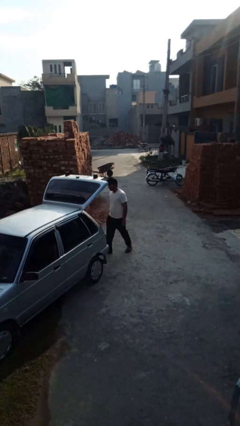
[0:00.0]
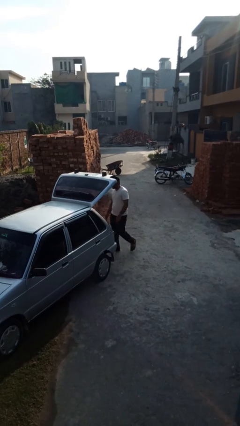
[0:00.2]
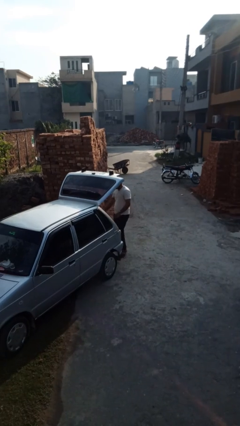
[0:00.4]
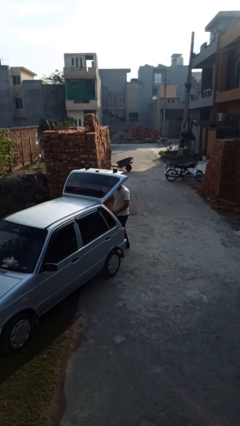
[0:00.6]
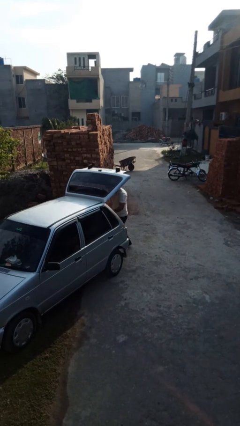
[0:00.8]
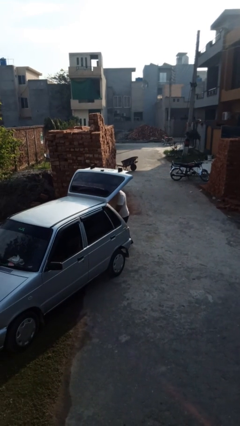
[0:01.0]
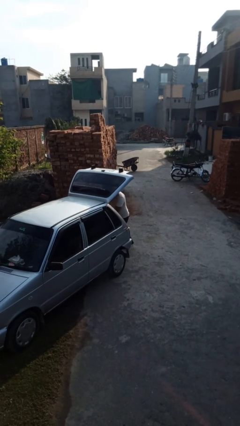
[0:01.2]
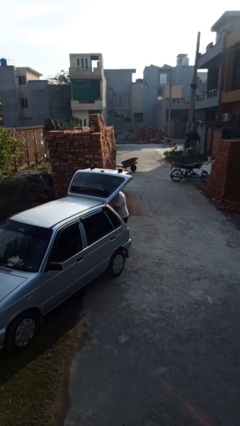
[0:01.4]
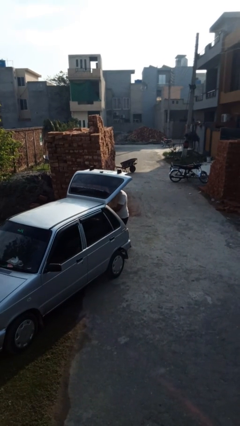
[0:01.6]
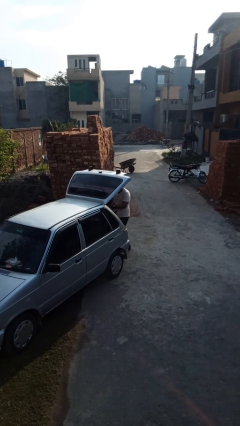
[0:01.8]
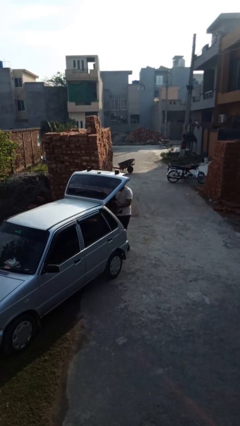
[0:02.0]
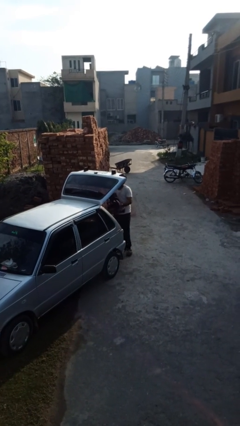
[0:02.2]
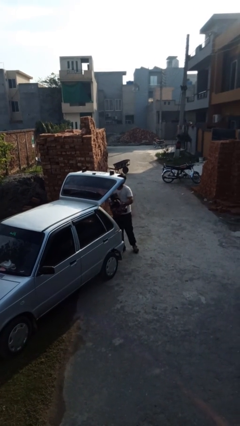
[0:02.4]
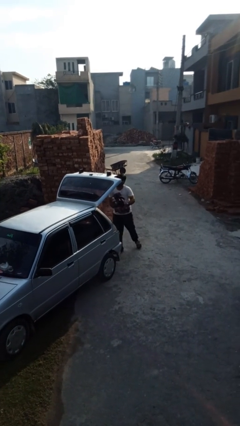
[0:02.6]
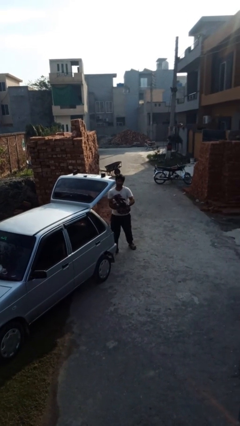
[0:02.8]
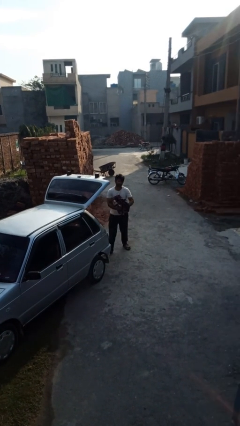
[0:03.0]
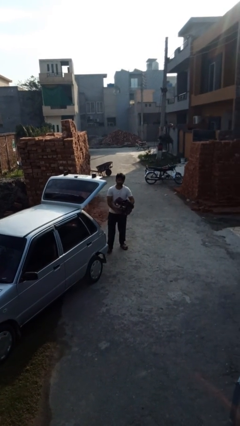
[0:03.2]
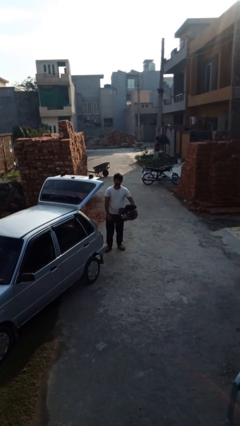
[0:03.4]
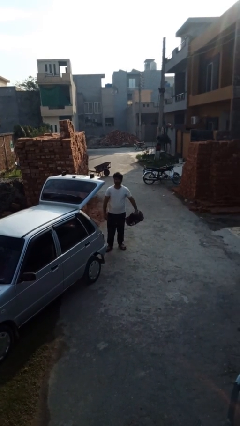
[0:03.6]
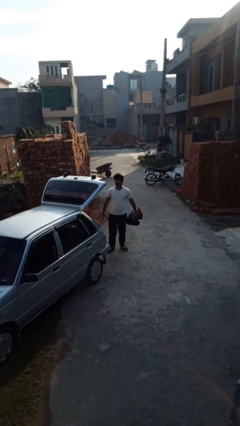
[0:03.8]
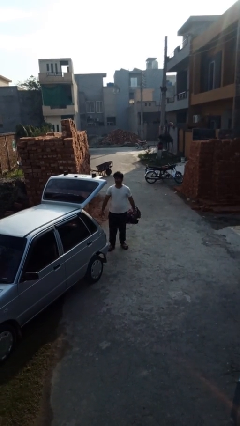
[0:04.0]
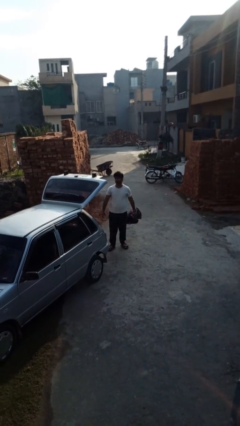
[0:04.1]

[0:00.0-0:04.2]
person unloads car

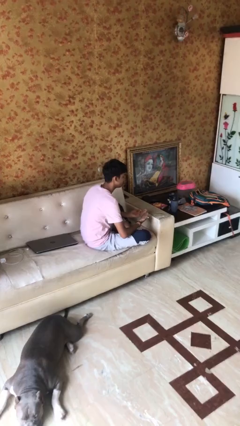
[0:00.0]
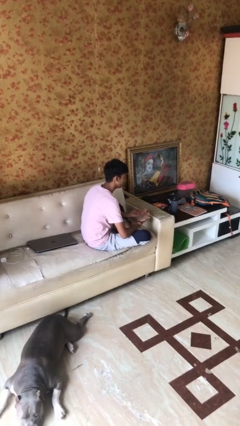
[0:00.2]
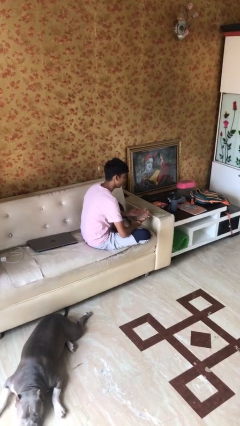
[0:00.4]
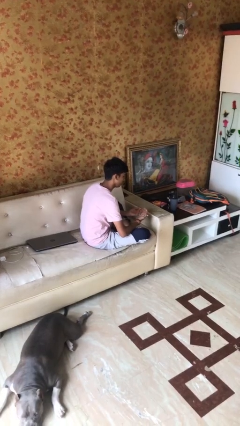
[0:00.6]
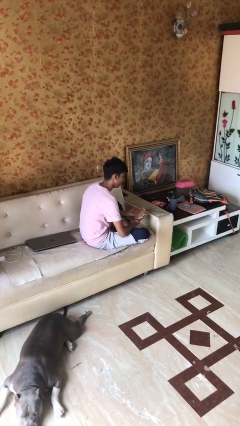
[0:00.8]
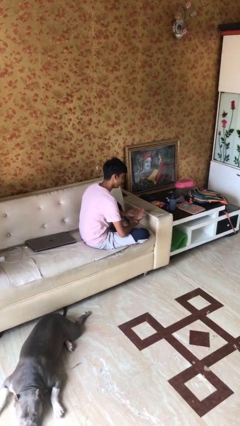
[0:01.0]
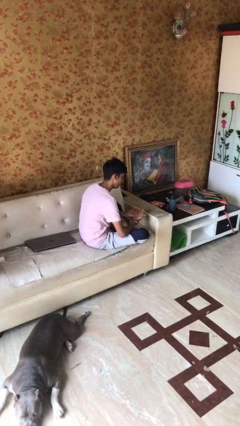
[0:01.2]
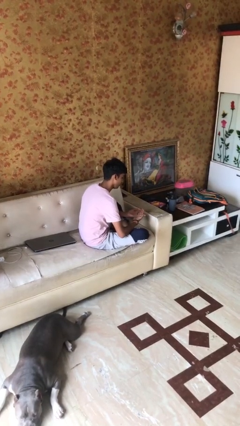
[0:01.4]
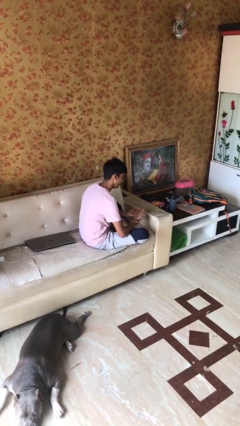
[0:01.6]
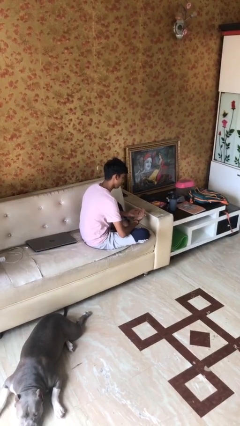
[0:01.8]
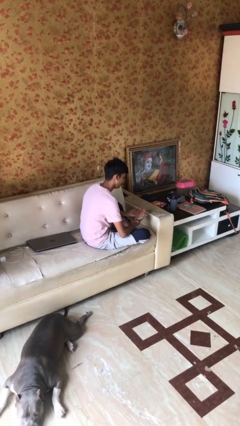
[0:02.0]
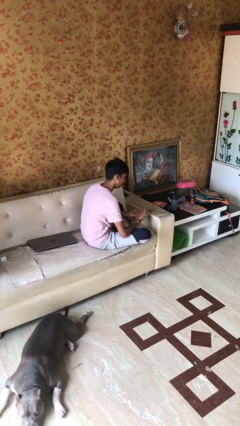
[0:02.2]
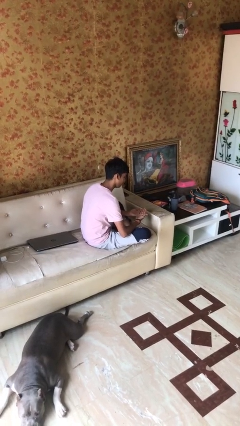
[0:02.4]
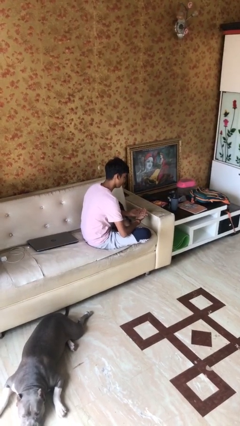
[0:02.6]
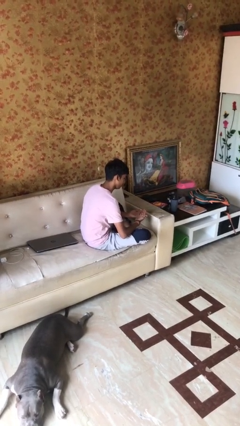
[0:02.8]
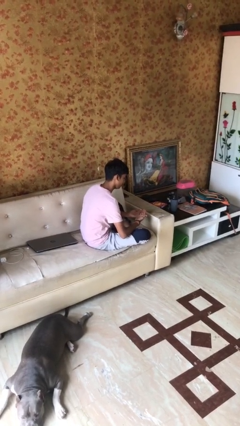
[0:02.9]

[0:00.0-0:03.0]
person looks at hands in lap

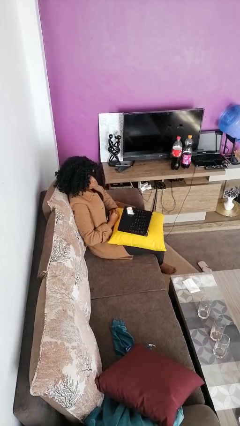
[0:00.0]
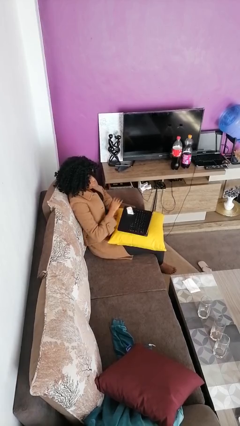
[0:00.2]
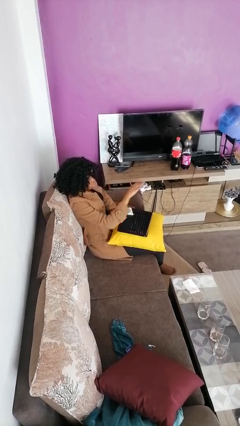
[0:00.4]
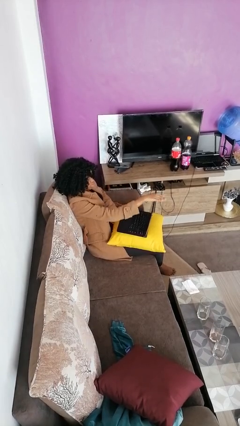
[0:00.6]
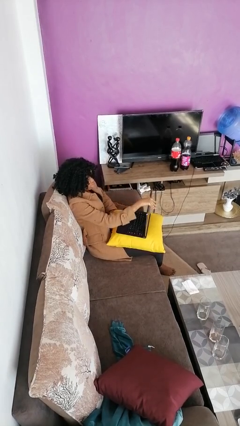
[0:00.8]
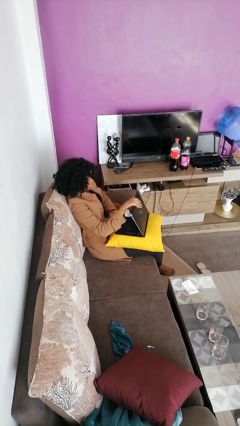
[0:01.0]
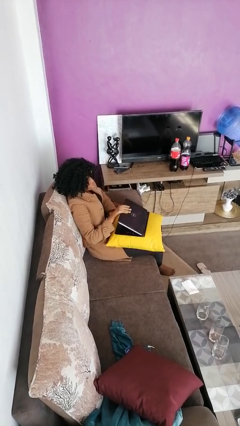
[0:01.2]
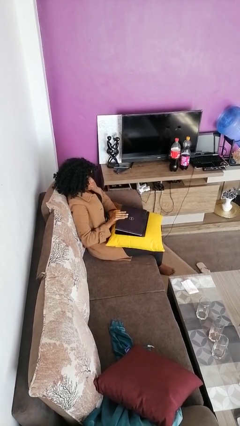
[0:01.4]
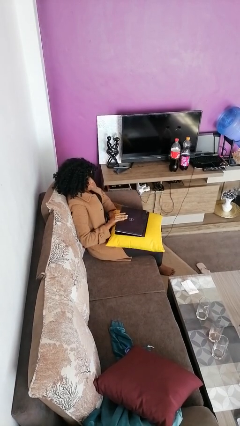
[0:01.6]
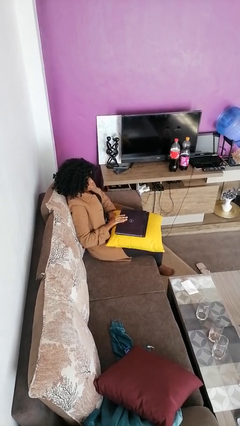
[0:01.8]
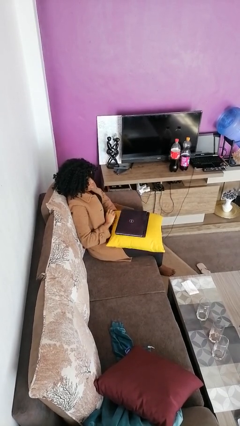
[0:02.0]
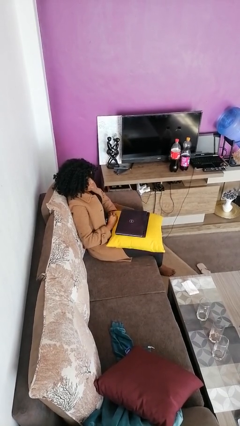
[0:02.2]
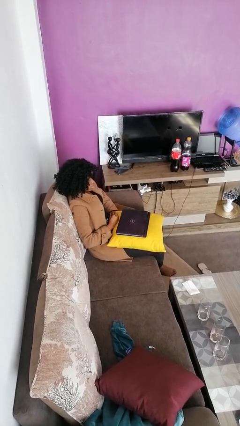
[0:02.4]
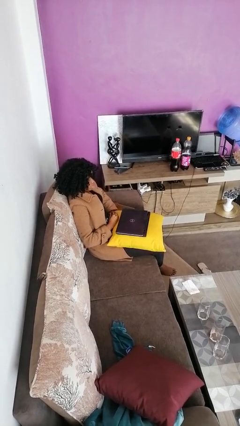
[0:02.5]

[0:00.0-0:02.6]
person closes laptop

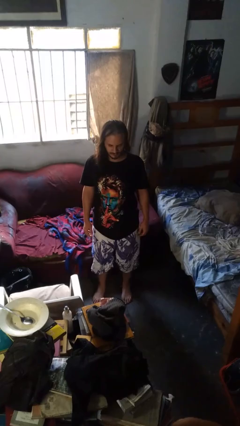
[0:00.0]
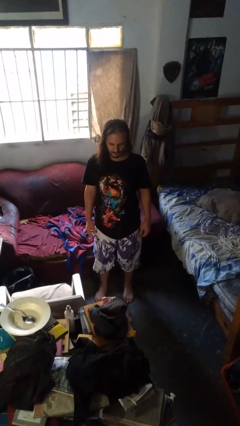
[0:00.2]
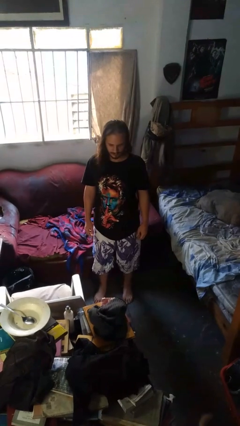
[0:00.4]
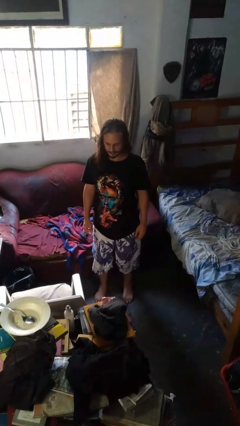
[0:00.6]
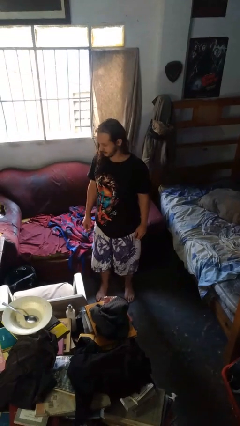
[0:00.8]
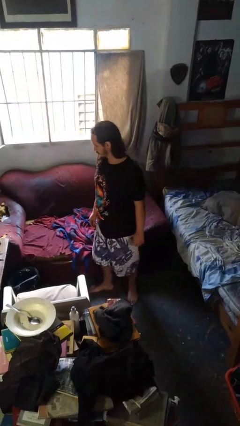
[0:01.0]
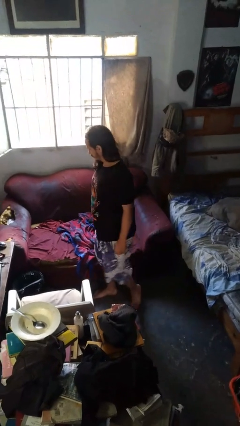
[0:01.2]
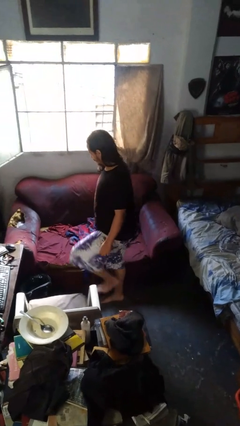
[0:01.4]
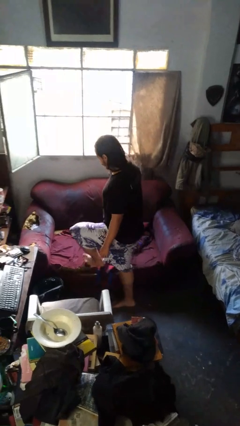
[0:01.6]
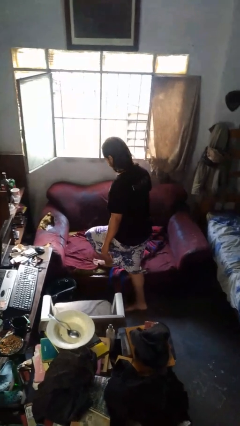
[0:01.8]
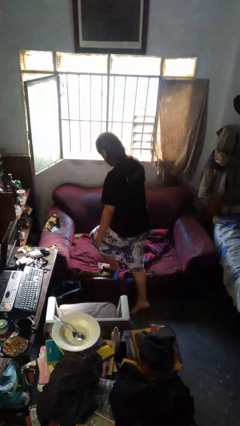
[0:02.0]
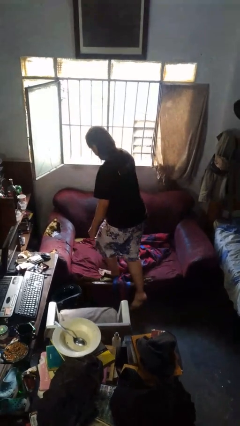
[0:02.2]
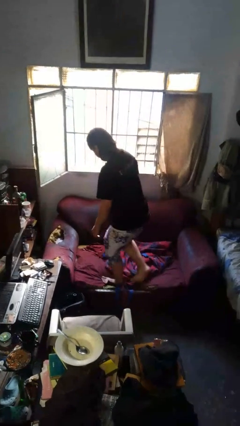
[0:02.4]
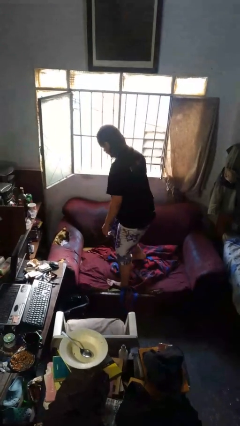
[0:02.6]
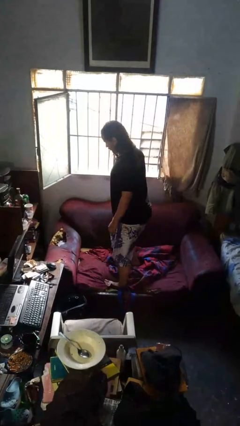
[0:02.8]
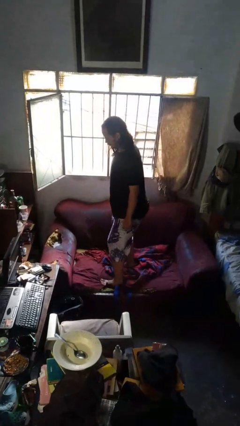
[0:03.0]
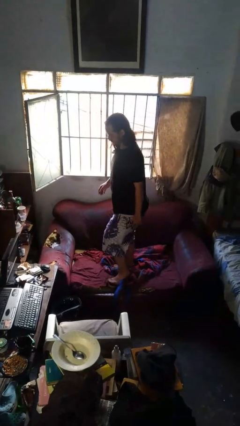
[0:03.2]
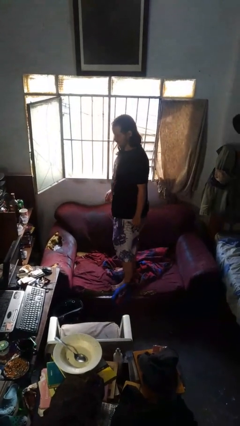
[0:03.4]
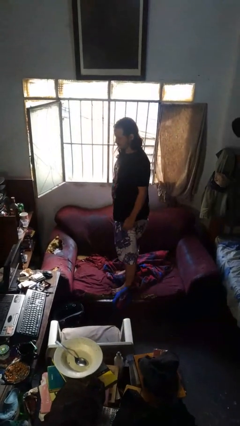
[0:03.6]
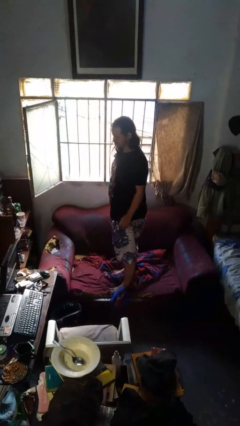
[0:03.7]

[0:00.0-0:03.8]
person climbs on couch

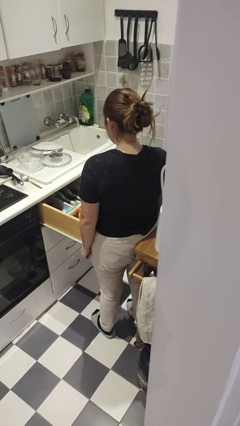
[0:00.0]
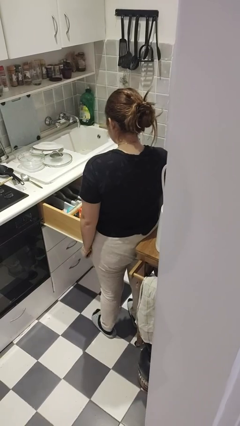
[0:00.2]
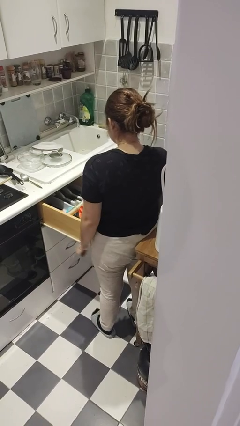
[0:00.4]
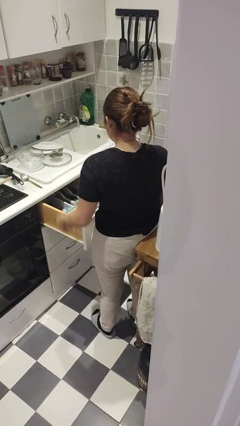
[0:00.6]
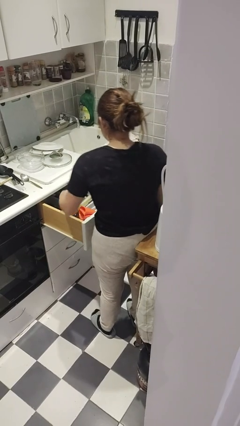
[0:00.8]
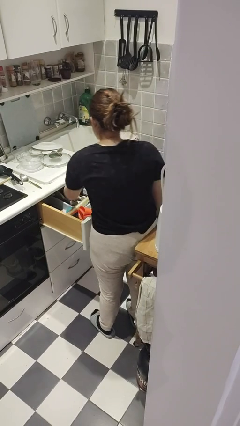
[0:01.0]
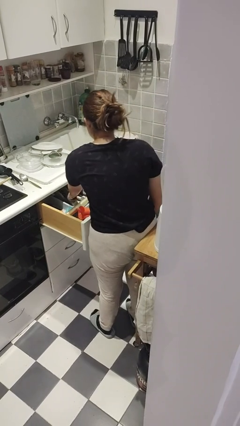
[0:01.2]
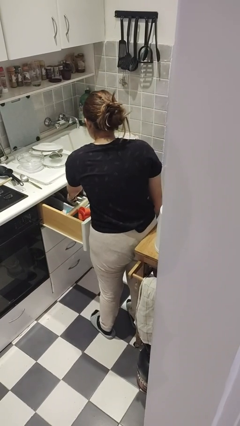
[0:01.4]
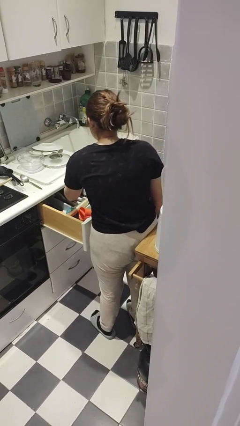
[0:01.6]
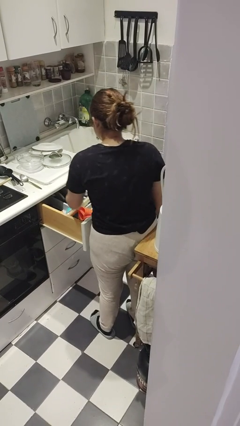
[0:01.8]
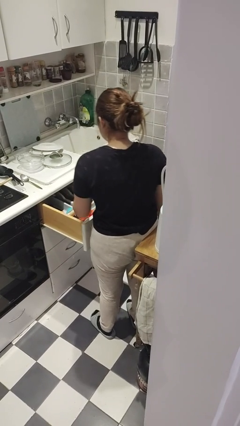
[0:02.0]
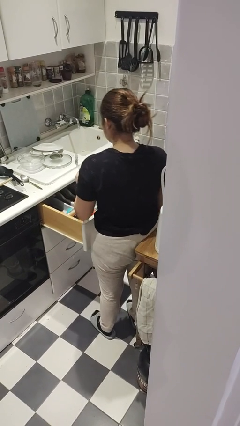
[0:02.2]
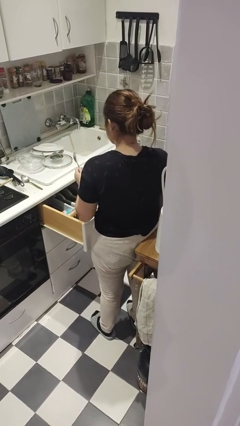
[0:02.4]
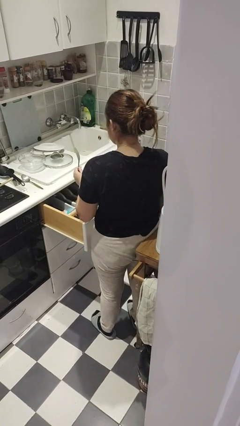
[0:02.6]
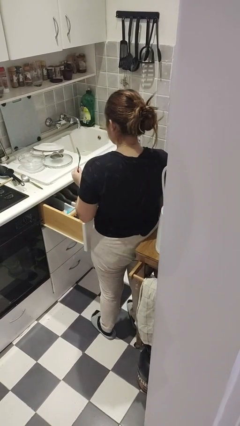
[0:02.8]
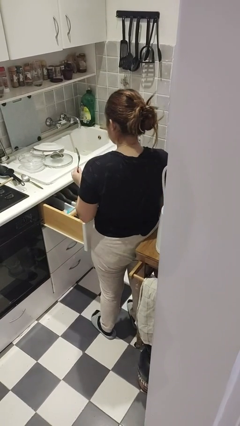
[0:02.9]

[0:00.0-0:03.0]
person takes object from kitchen drawer

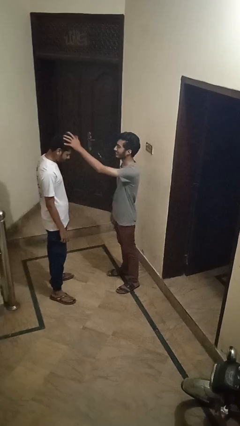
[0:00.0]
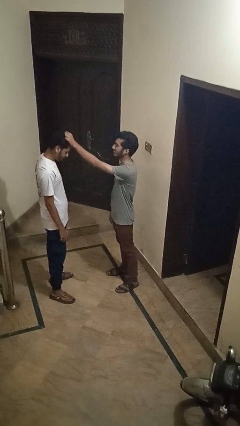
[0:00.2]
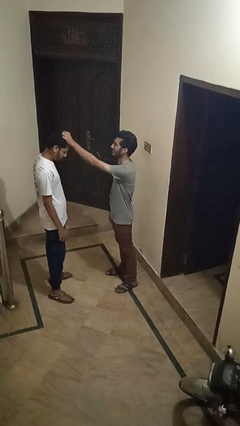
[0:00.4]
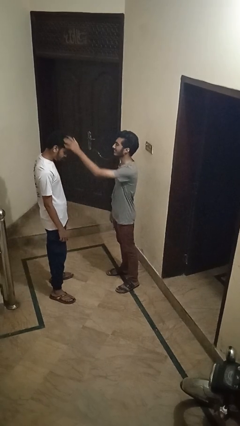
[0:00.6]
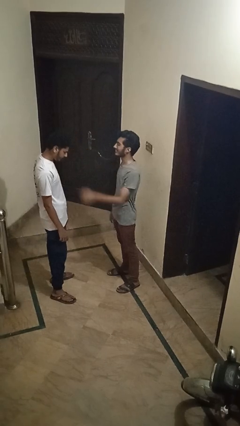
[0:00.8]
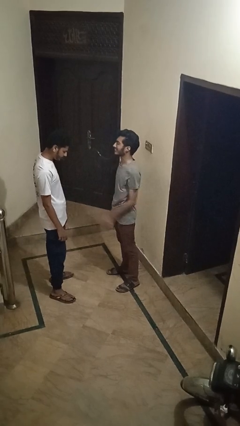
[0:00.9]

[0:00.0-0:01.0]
person grabs person by hair
